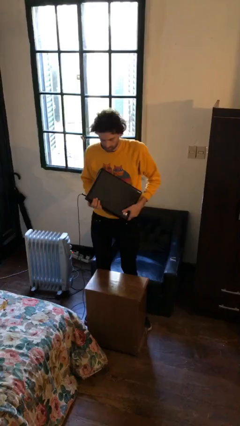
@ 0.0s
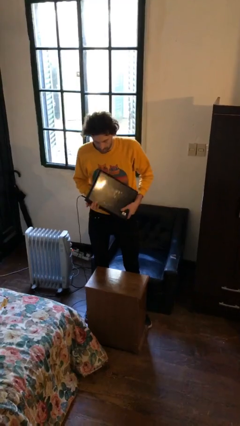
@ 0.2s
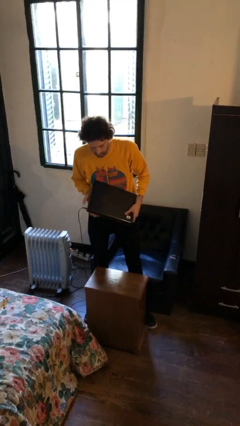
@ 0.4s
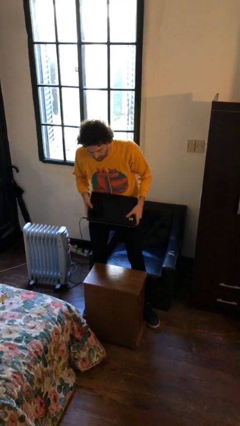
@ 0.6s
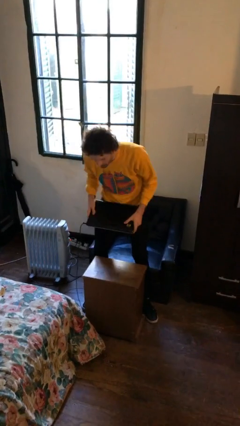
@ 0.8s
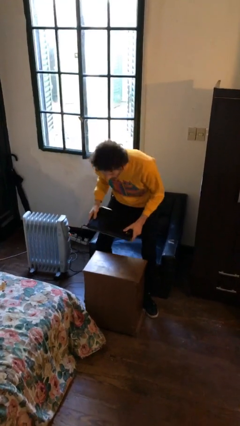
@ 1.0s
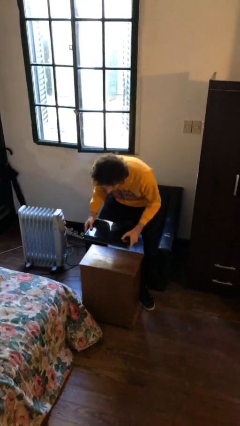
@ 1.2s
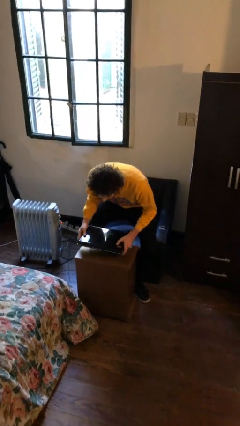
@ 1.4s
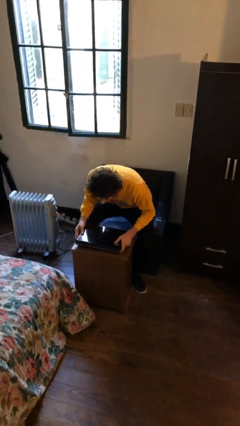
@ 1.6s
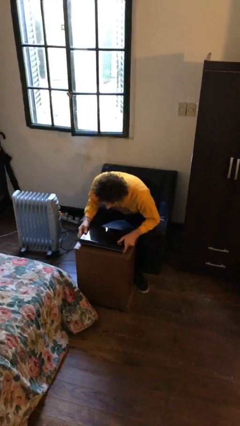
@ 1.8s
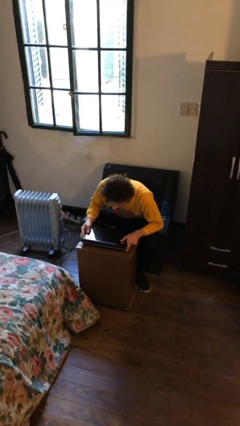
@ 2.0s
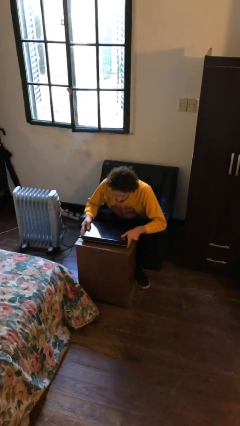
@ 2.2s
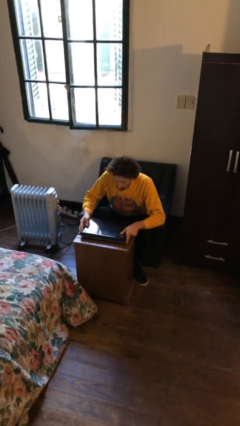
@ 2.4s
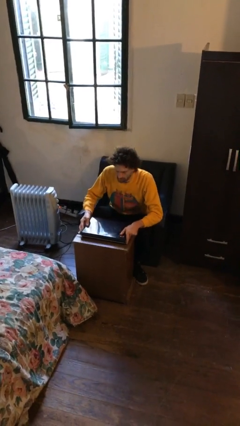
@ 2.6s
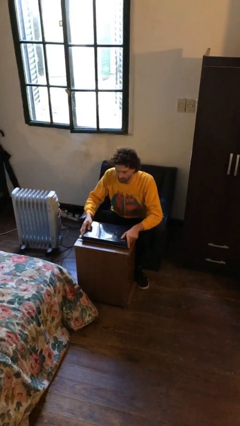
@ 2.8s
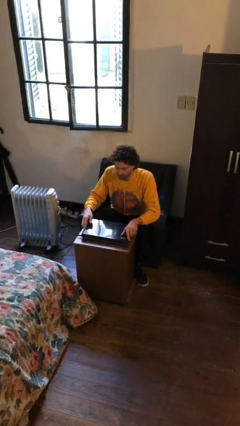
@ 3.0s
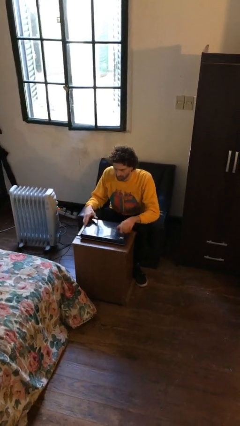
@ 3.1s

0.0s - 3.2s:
person sits down

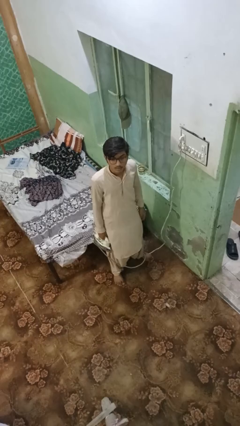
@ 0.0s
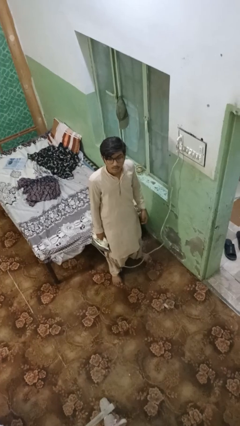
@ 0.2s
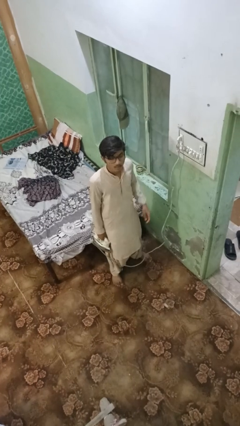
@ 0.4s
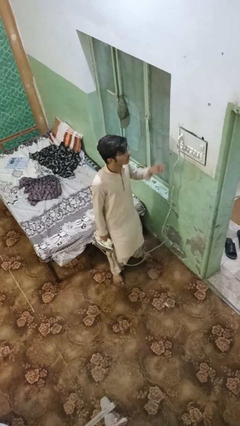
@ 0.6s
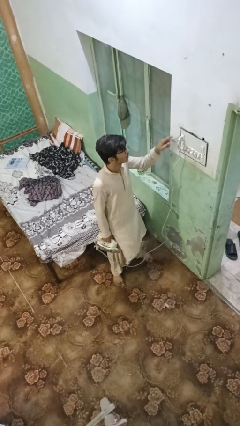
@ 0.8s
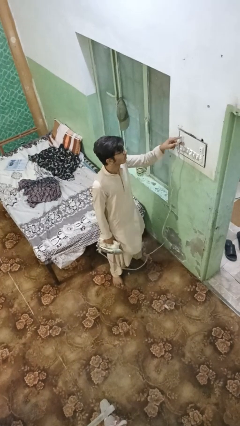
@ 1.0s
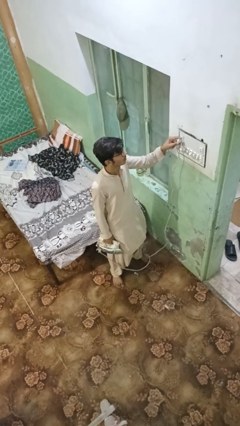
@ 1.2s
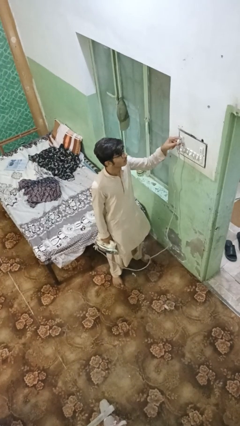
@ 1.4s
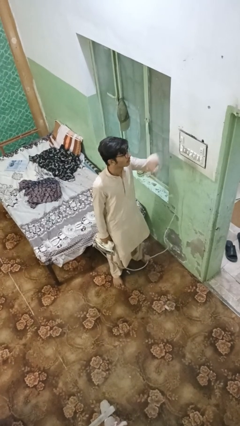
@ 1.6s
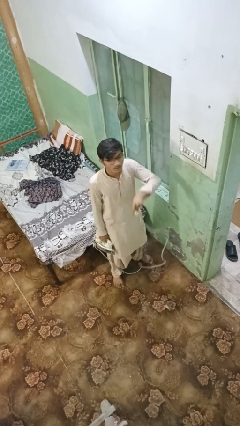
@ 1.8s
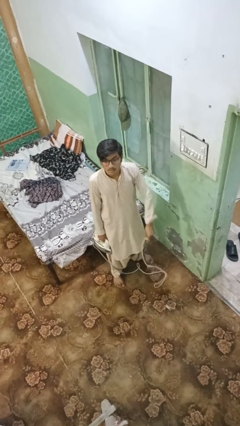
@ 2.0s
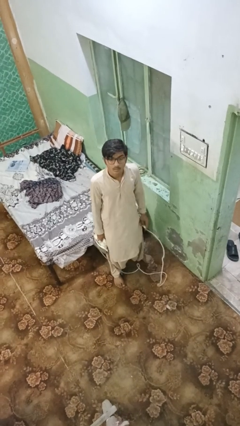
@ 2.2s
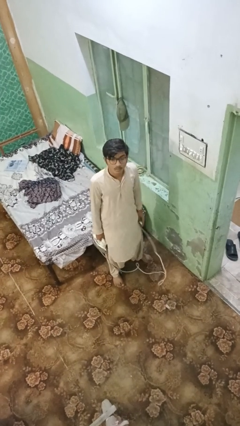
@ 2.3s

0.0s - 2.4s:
person unplugs from electrical socket

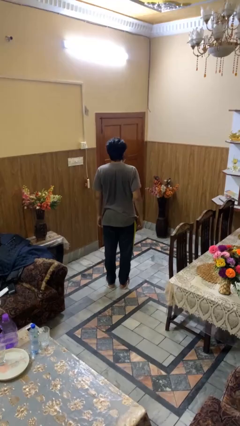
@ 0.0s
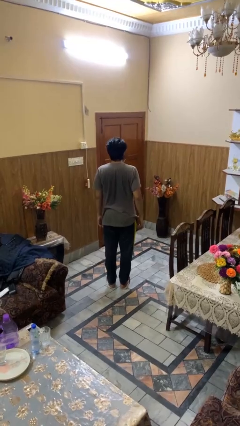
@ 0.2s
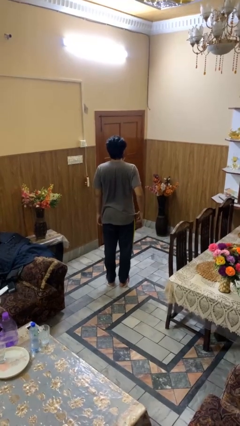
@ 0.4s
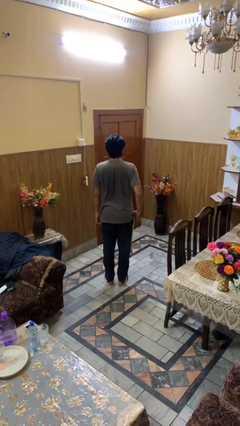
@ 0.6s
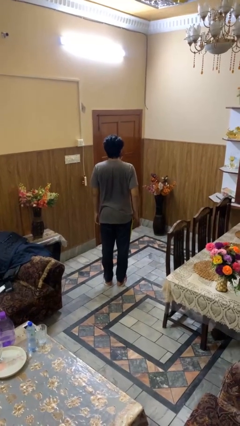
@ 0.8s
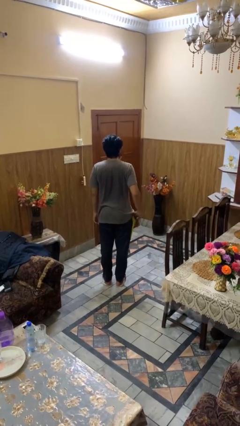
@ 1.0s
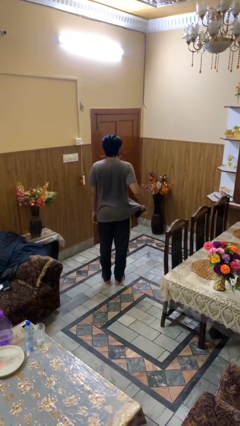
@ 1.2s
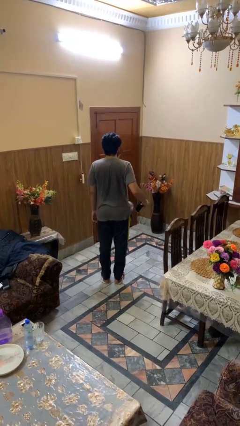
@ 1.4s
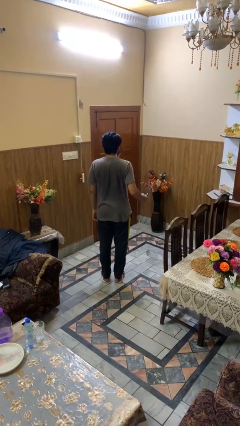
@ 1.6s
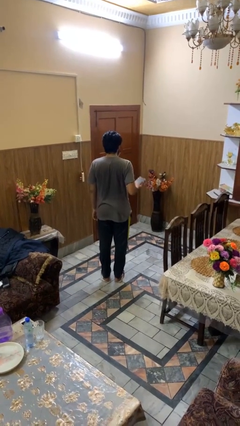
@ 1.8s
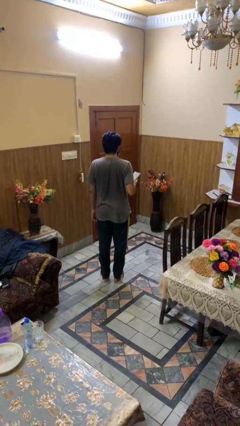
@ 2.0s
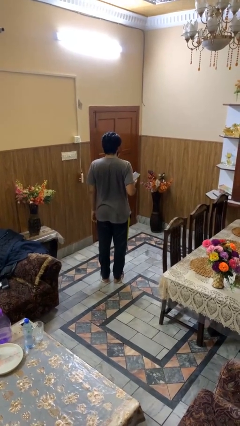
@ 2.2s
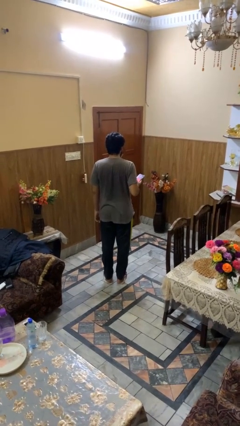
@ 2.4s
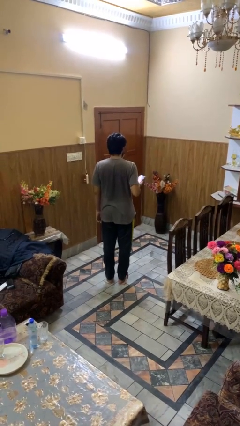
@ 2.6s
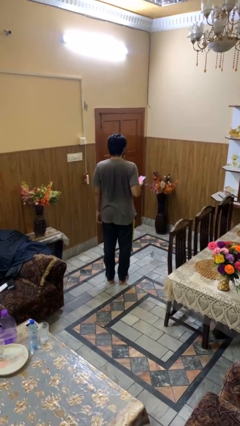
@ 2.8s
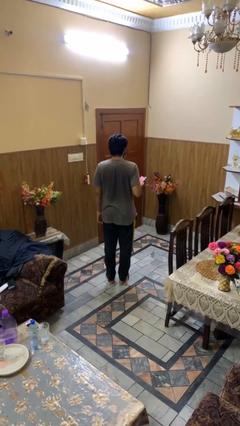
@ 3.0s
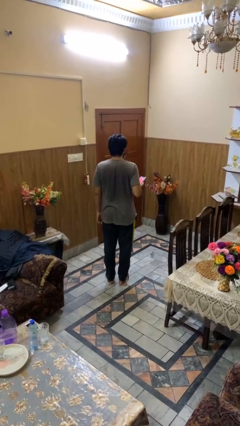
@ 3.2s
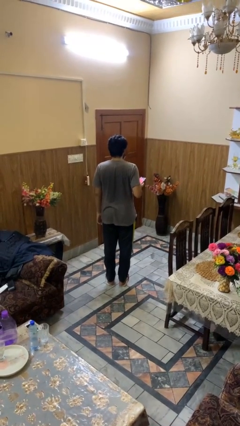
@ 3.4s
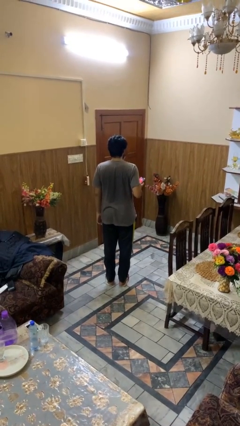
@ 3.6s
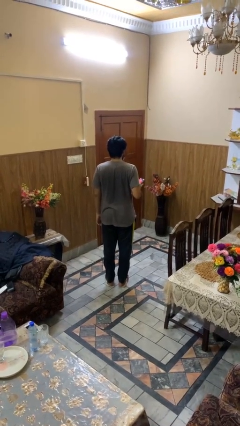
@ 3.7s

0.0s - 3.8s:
person takes phone from pocket

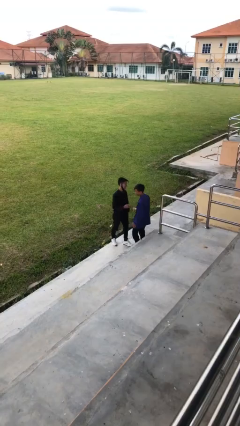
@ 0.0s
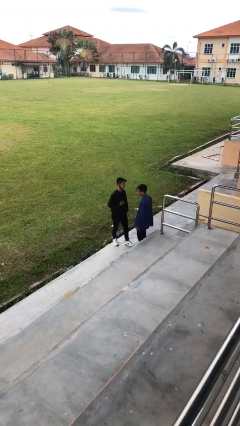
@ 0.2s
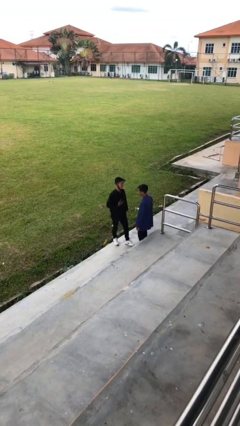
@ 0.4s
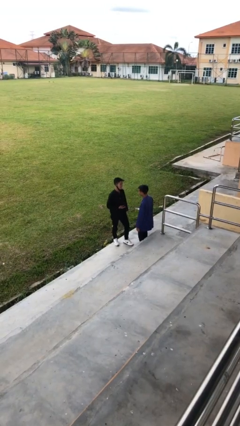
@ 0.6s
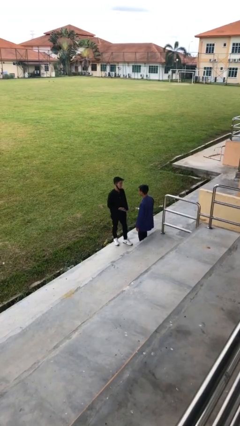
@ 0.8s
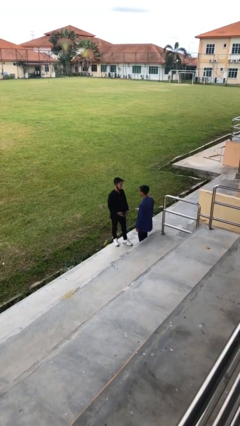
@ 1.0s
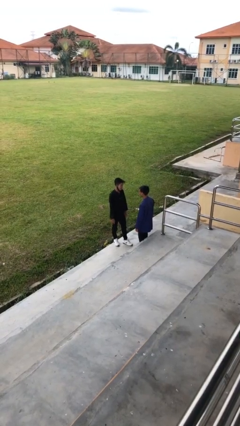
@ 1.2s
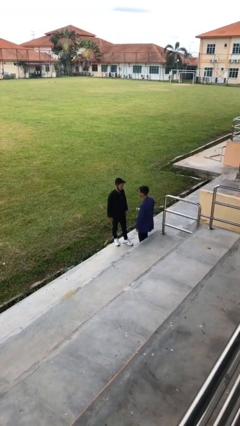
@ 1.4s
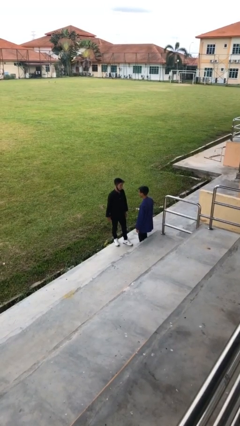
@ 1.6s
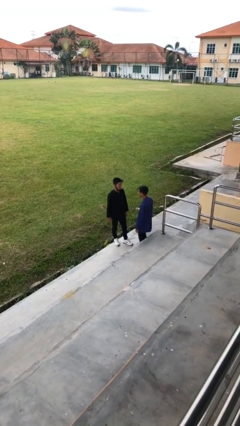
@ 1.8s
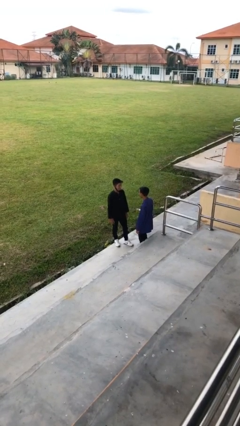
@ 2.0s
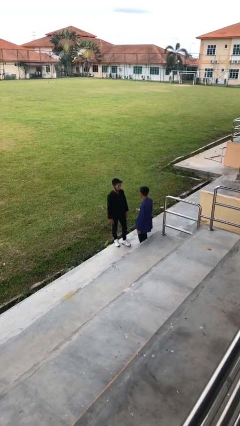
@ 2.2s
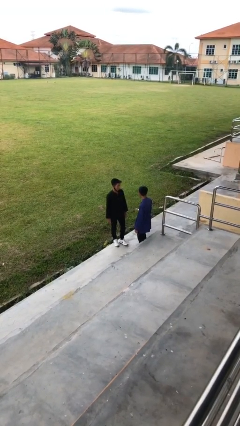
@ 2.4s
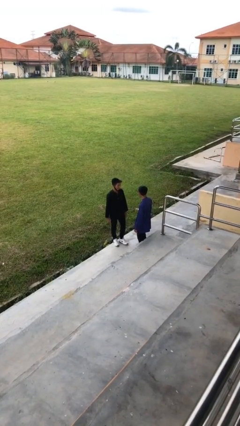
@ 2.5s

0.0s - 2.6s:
person talks to person

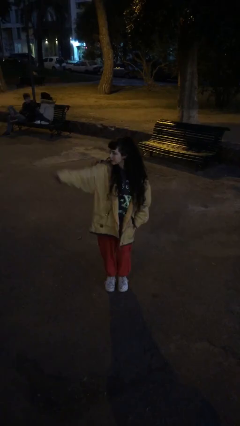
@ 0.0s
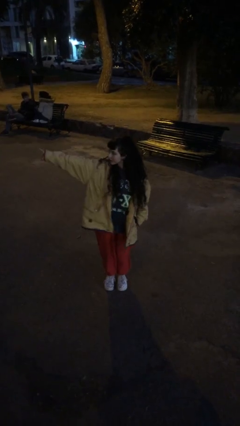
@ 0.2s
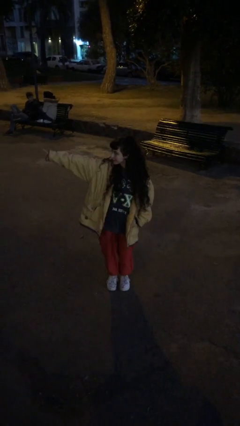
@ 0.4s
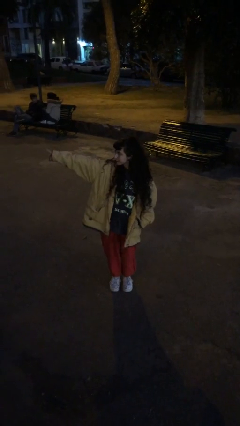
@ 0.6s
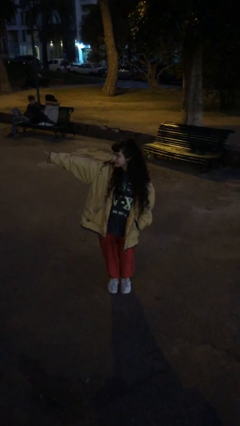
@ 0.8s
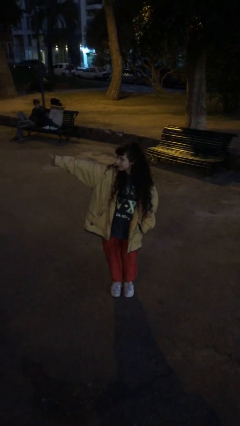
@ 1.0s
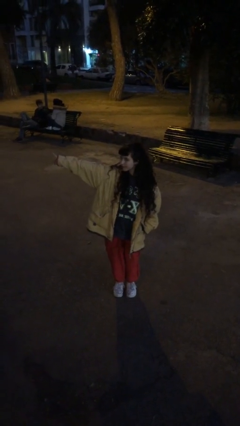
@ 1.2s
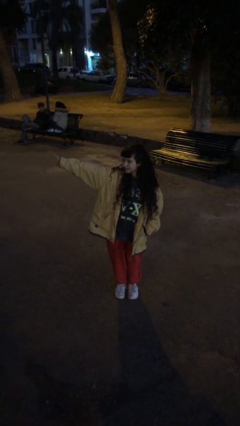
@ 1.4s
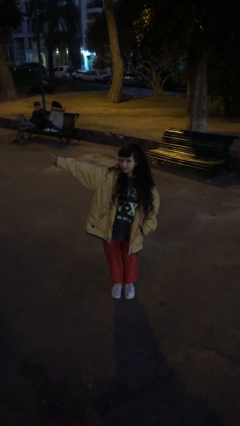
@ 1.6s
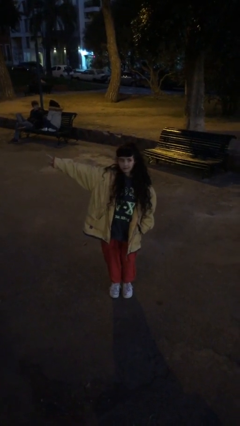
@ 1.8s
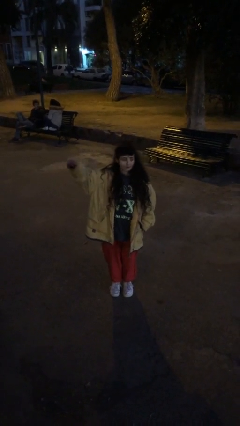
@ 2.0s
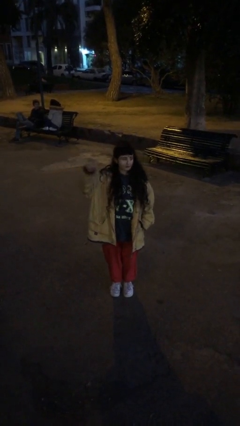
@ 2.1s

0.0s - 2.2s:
person points at person

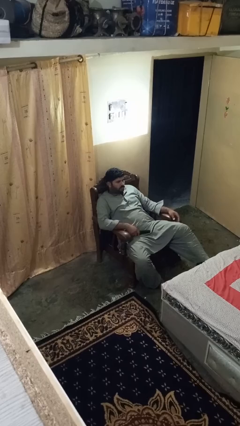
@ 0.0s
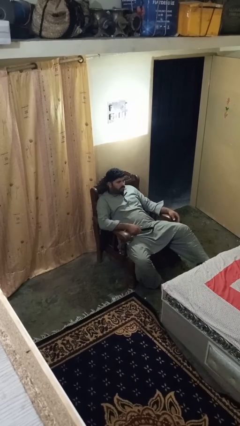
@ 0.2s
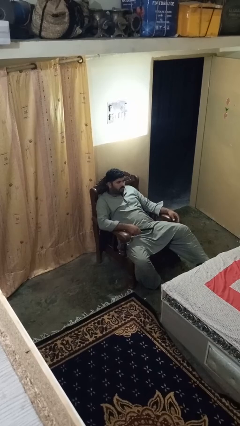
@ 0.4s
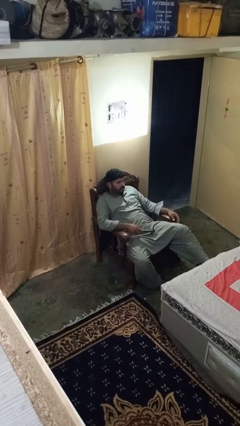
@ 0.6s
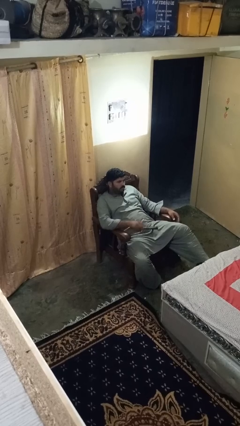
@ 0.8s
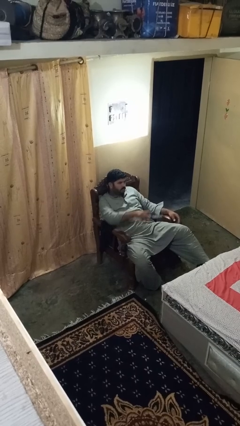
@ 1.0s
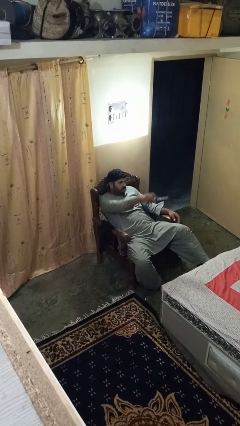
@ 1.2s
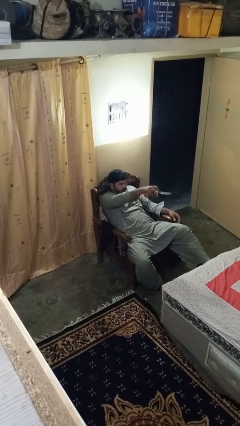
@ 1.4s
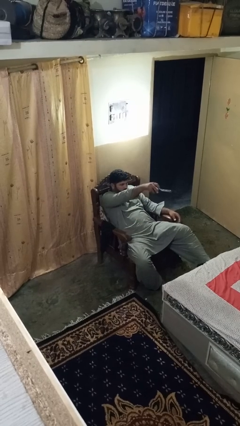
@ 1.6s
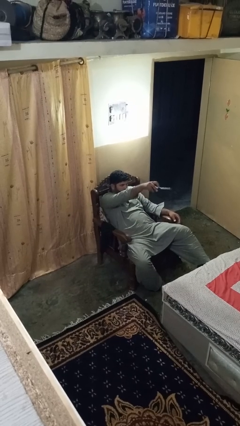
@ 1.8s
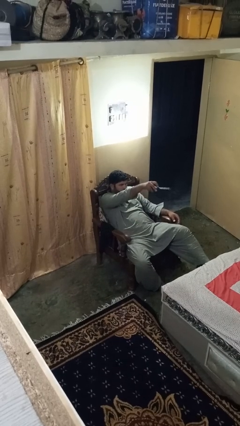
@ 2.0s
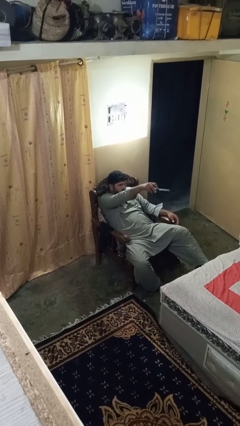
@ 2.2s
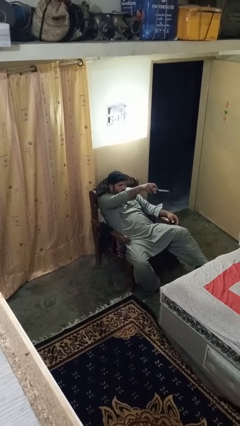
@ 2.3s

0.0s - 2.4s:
person uses television remote

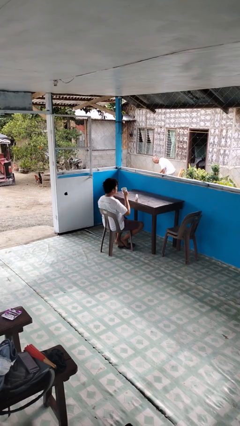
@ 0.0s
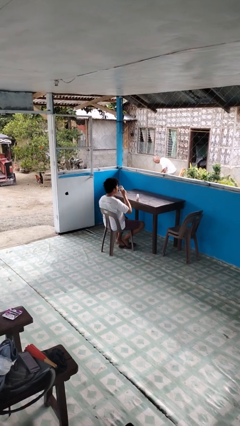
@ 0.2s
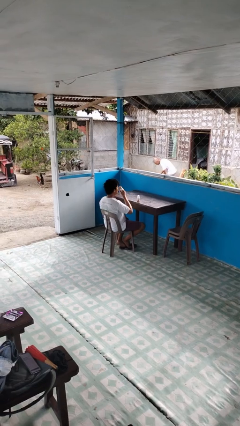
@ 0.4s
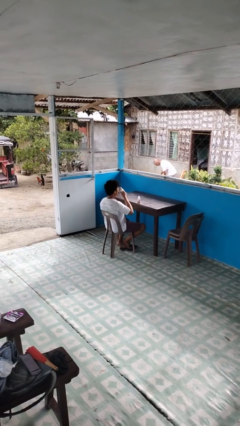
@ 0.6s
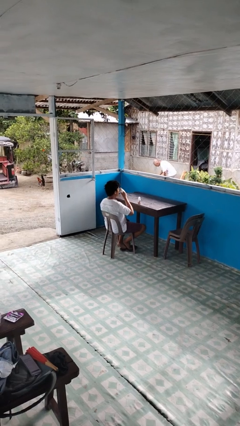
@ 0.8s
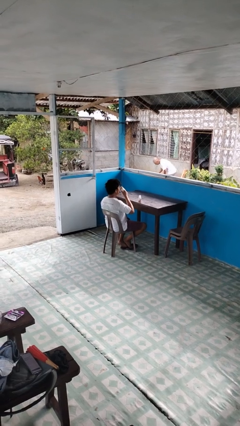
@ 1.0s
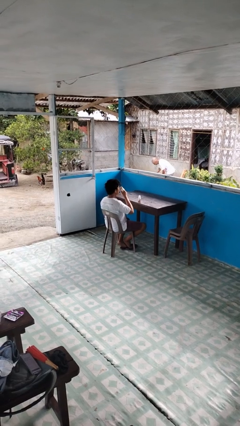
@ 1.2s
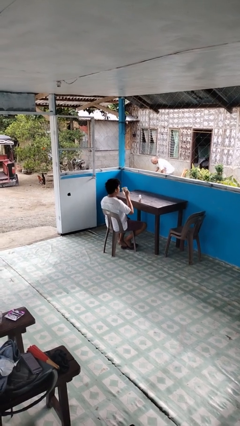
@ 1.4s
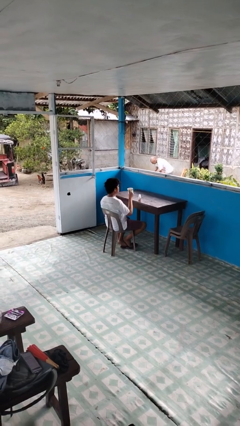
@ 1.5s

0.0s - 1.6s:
person drinks from cup
